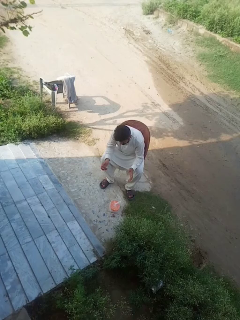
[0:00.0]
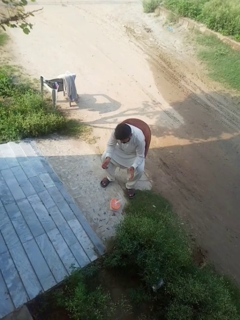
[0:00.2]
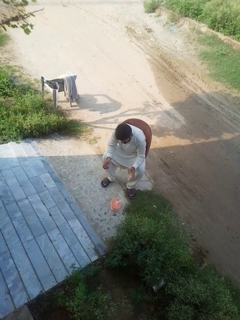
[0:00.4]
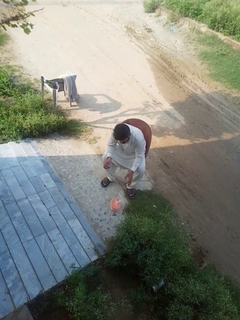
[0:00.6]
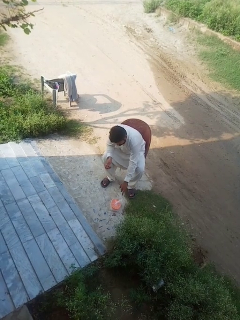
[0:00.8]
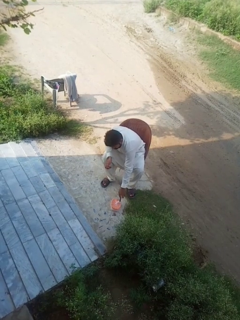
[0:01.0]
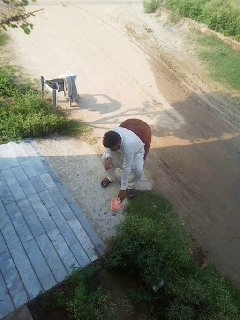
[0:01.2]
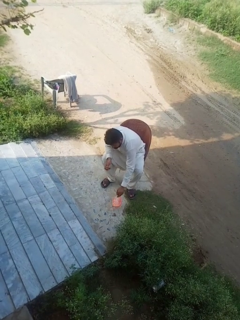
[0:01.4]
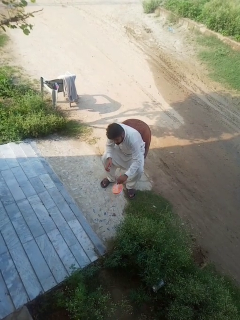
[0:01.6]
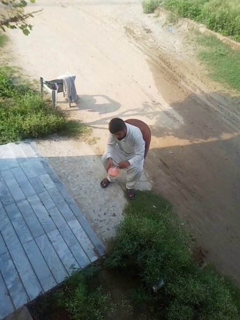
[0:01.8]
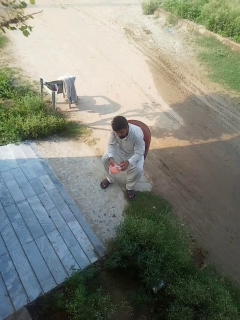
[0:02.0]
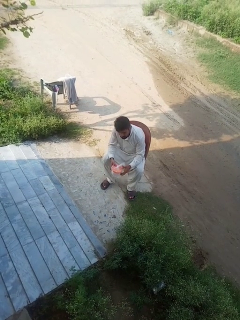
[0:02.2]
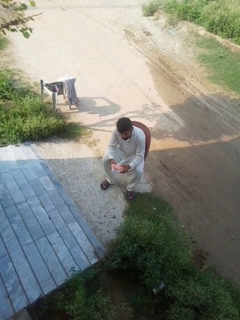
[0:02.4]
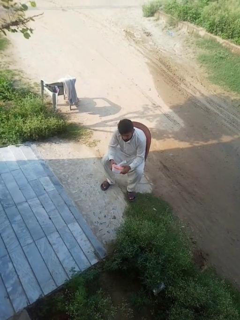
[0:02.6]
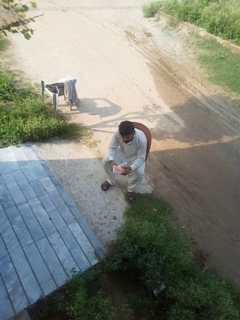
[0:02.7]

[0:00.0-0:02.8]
person picks up object from floor

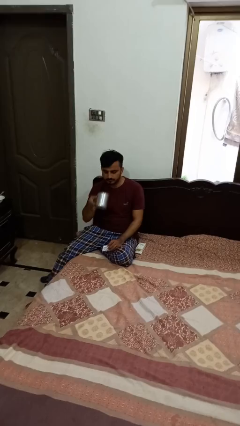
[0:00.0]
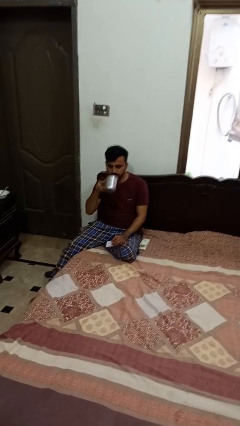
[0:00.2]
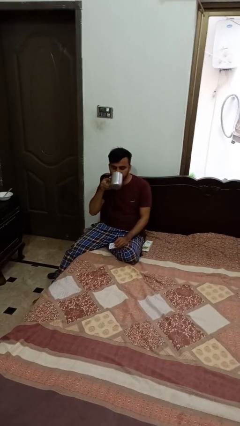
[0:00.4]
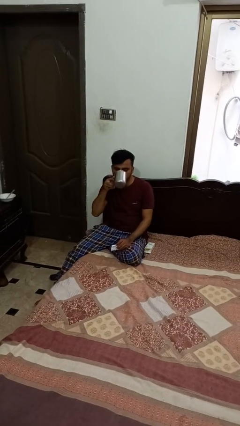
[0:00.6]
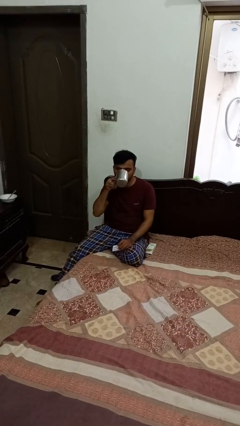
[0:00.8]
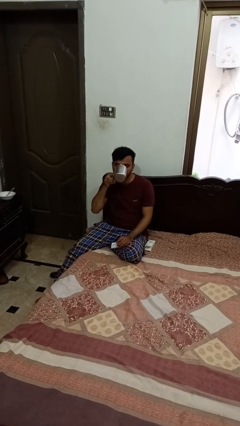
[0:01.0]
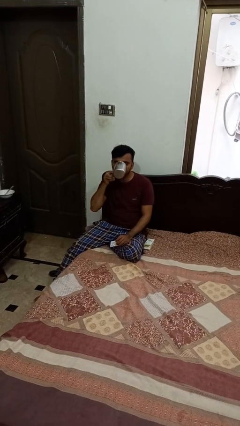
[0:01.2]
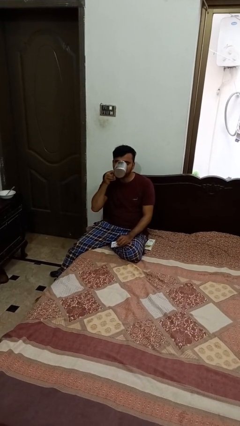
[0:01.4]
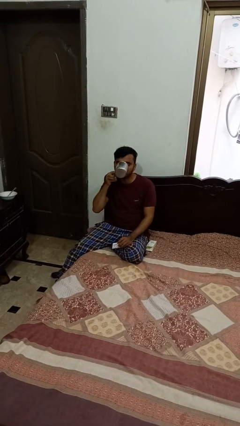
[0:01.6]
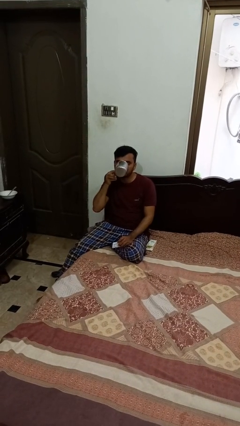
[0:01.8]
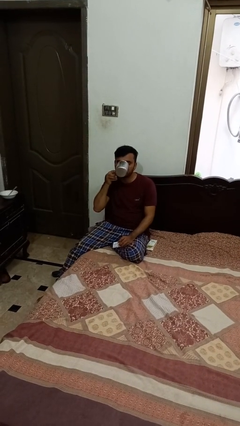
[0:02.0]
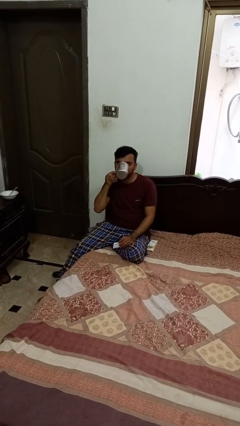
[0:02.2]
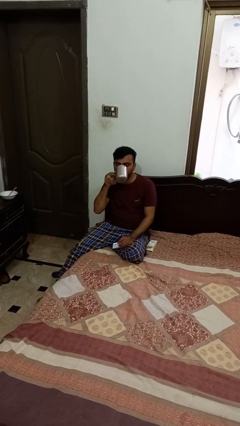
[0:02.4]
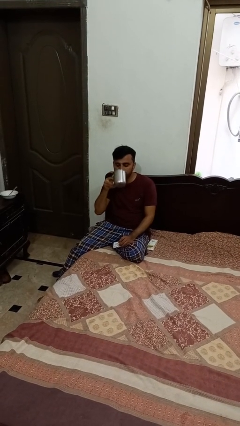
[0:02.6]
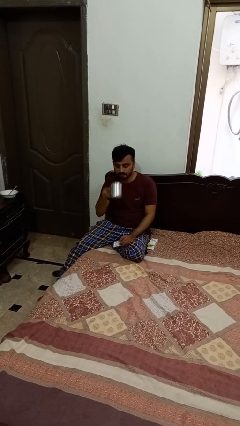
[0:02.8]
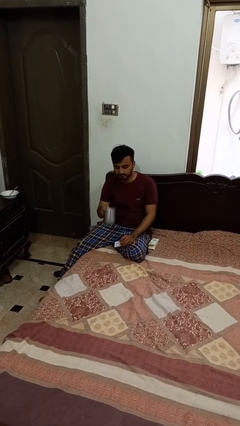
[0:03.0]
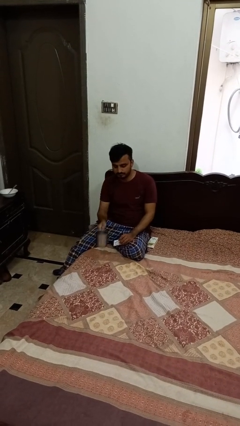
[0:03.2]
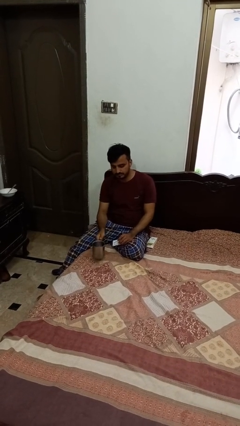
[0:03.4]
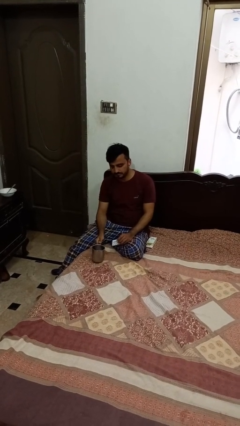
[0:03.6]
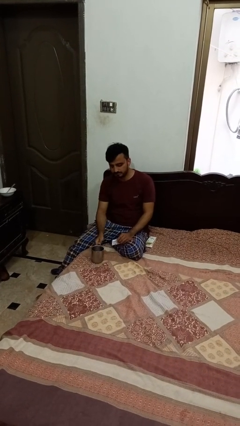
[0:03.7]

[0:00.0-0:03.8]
person drinks from cup

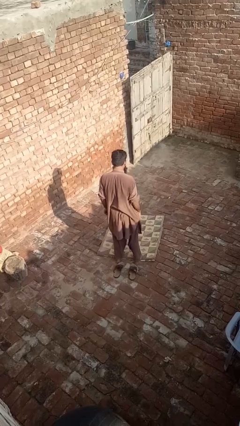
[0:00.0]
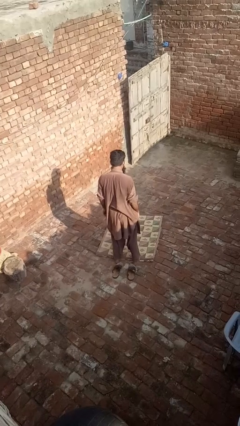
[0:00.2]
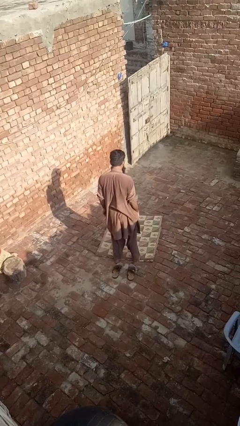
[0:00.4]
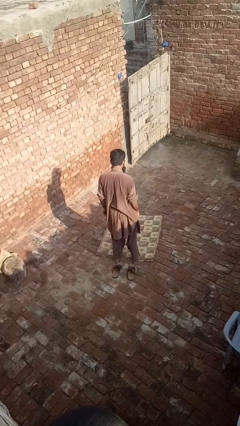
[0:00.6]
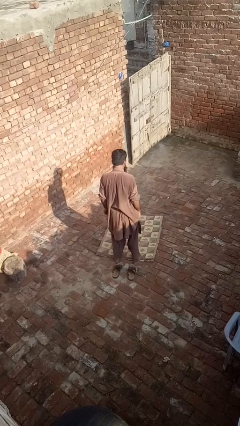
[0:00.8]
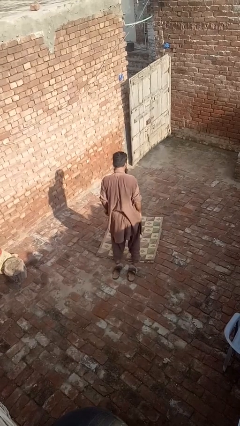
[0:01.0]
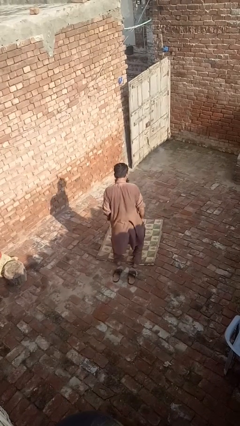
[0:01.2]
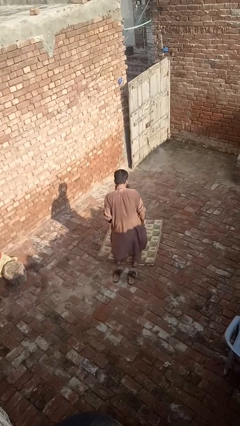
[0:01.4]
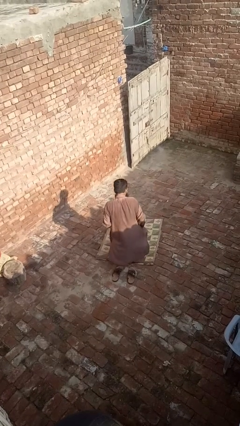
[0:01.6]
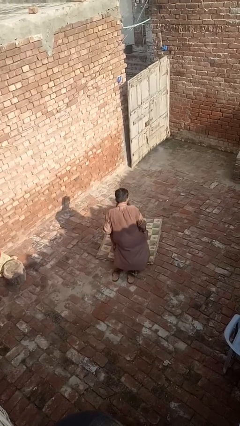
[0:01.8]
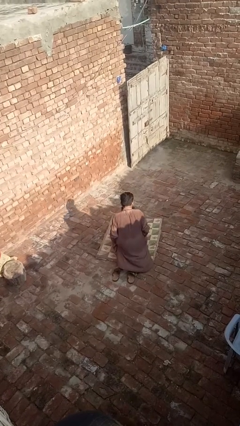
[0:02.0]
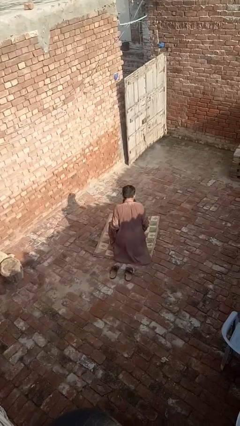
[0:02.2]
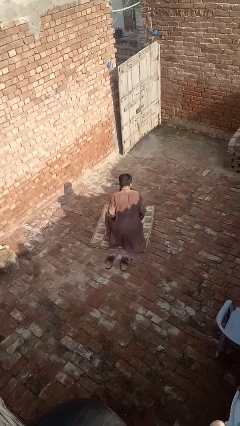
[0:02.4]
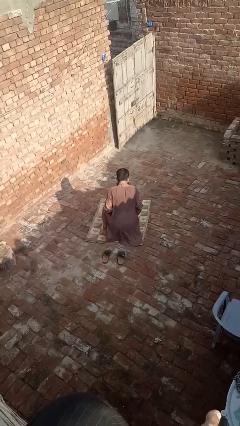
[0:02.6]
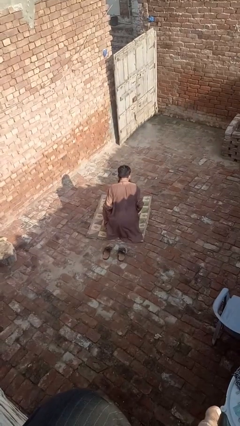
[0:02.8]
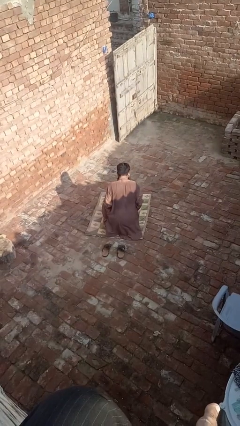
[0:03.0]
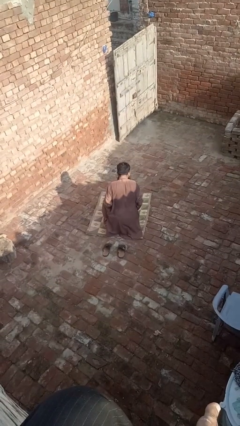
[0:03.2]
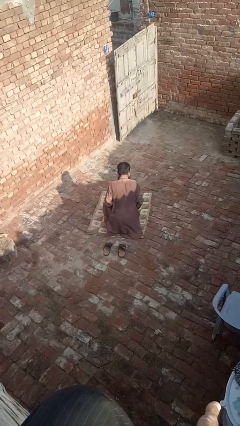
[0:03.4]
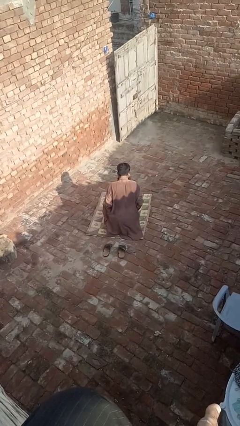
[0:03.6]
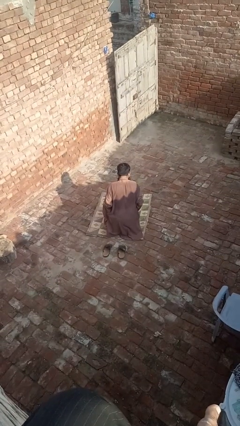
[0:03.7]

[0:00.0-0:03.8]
person kneels

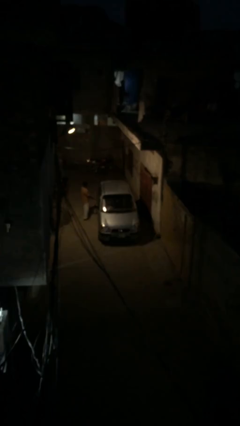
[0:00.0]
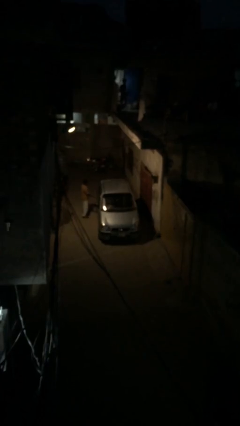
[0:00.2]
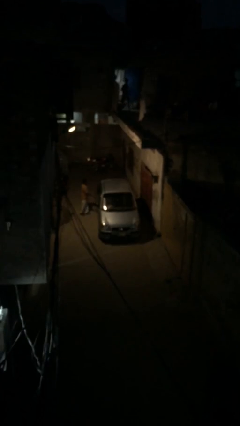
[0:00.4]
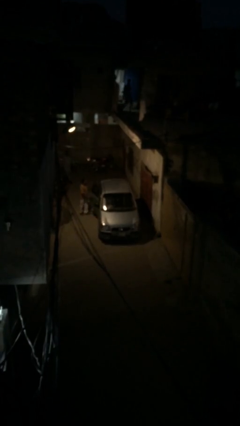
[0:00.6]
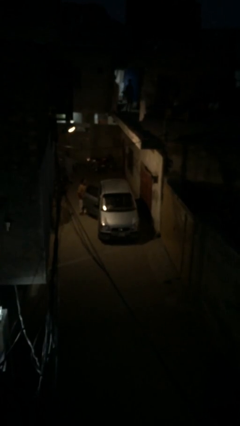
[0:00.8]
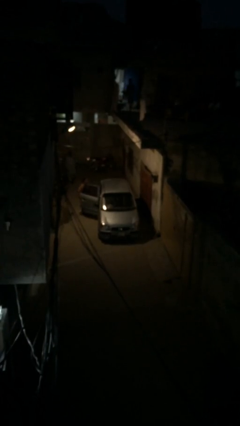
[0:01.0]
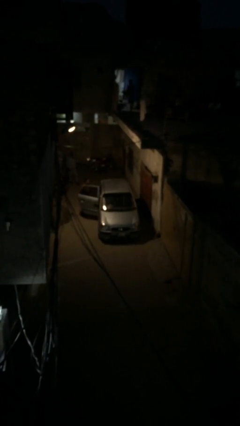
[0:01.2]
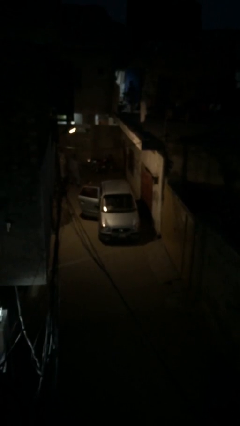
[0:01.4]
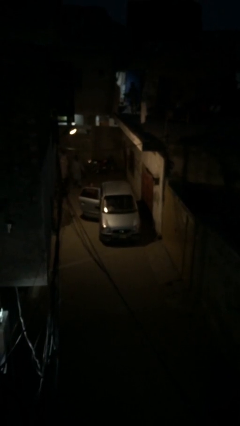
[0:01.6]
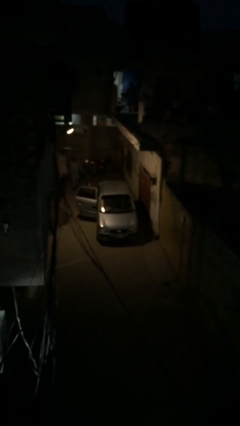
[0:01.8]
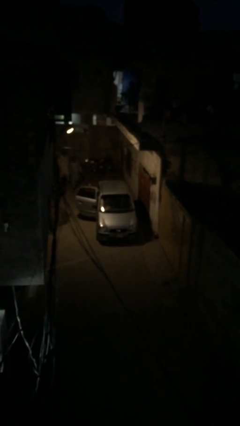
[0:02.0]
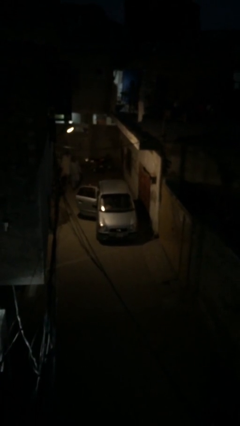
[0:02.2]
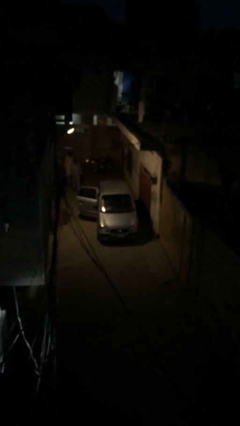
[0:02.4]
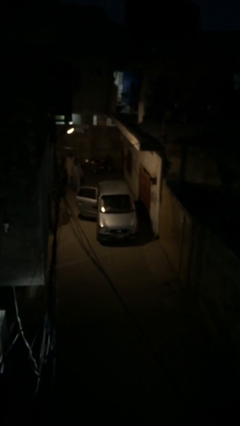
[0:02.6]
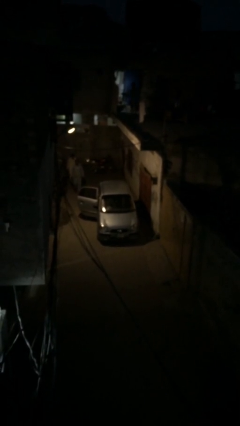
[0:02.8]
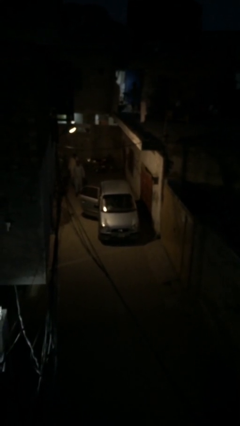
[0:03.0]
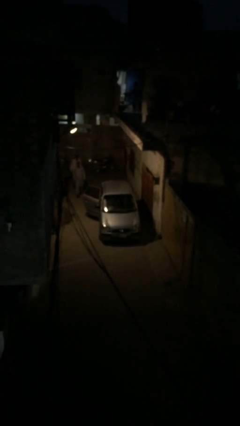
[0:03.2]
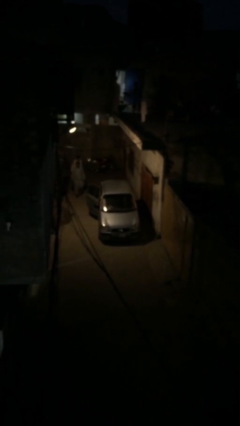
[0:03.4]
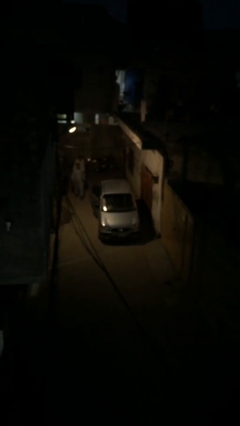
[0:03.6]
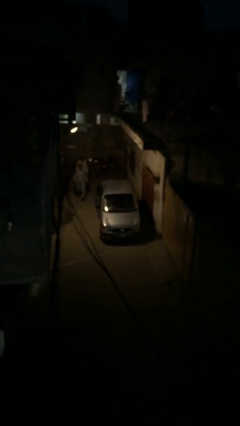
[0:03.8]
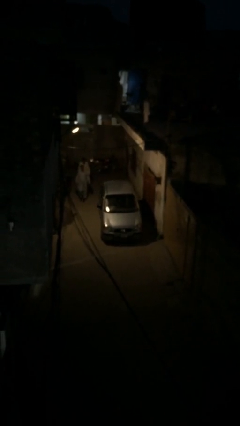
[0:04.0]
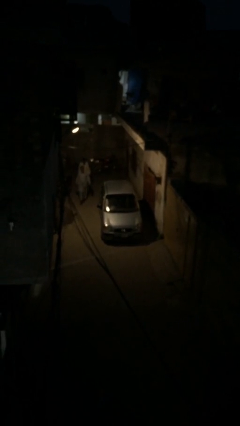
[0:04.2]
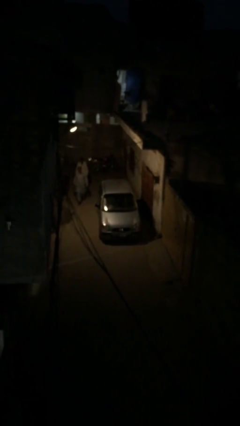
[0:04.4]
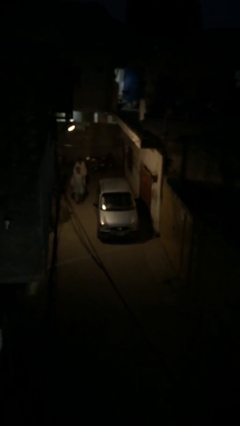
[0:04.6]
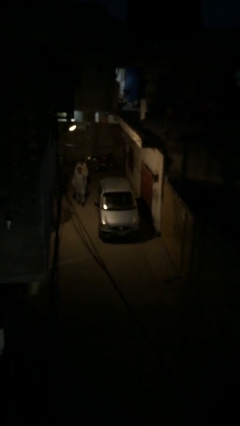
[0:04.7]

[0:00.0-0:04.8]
car picks up person

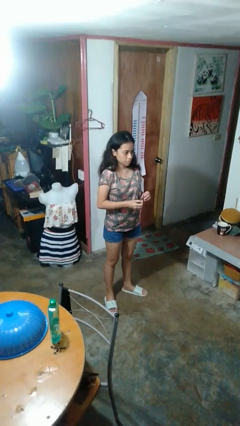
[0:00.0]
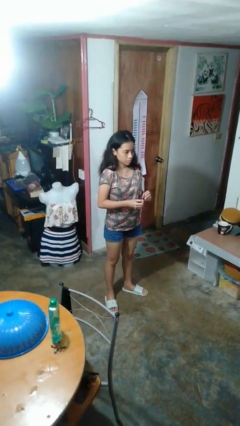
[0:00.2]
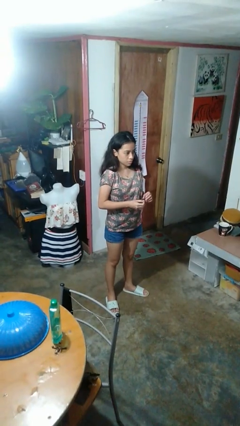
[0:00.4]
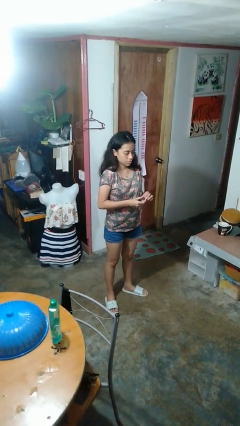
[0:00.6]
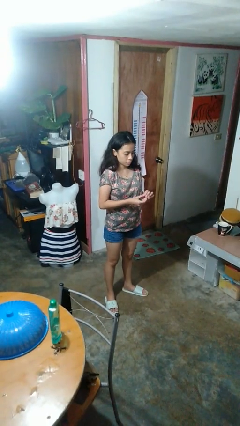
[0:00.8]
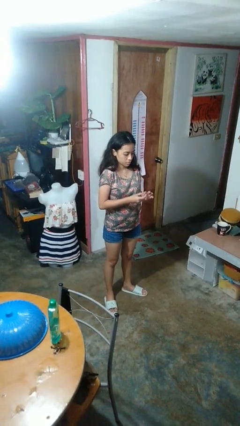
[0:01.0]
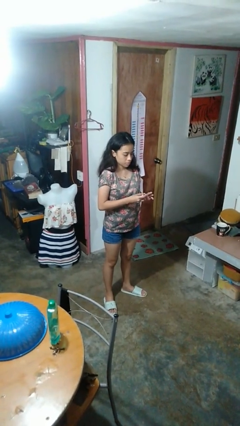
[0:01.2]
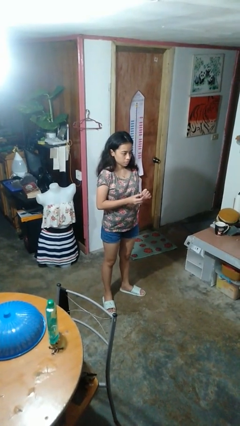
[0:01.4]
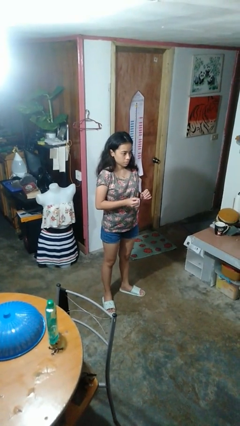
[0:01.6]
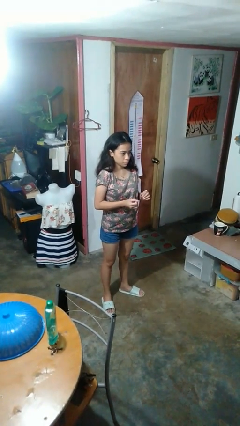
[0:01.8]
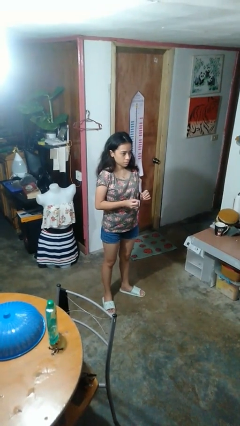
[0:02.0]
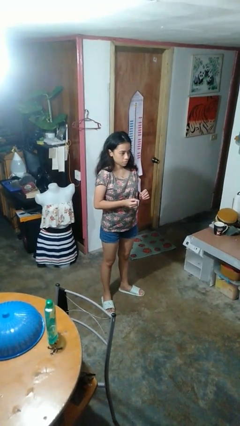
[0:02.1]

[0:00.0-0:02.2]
person puts on ring

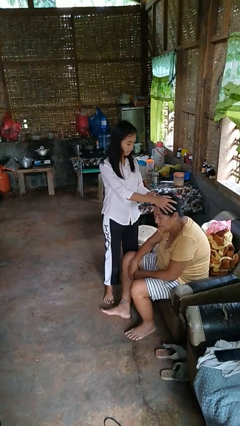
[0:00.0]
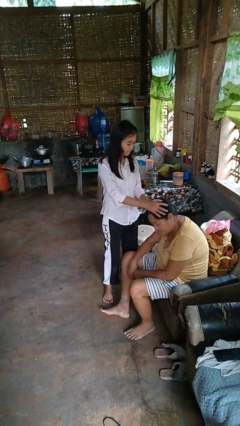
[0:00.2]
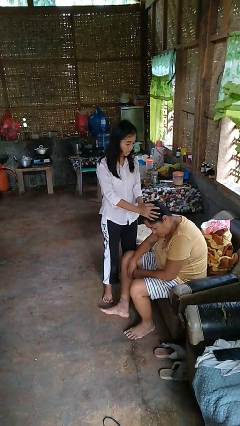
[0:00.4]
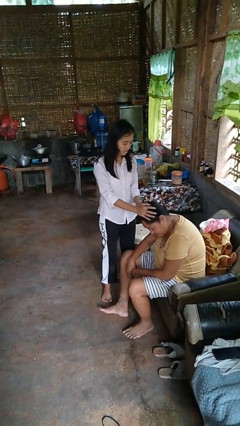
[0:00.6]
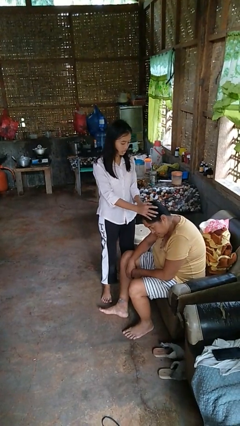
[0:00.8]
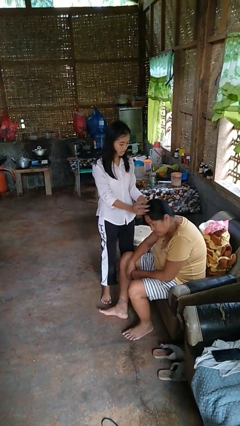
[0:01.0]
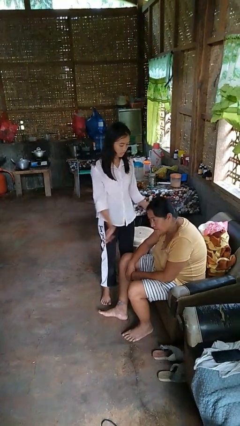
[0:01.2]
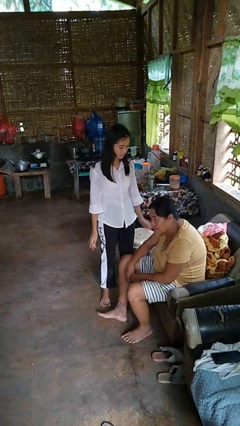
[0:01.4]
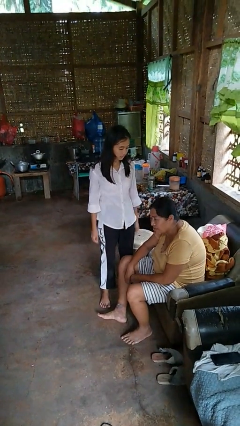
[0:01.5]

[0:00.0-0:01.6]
person grabs person by hair
